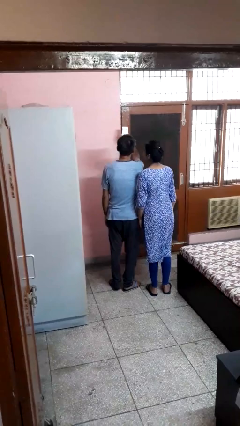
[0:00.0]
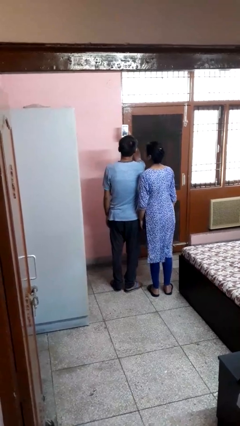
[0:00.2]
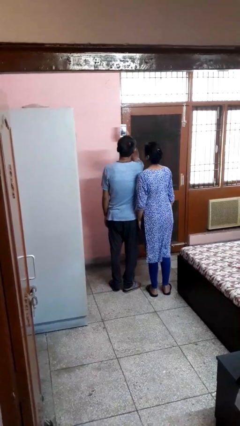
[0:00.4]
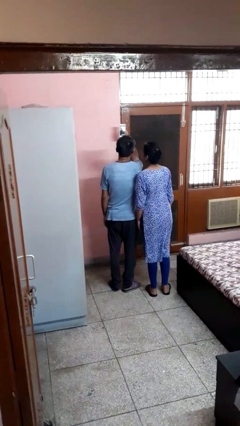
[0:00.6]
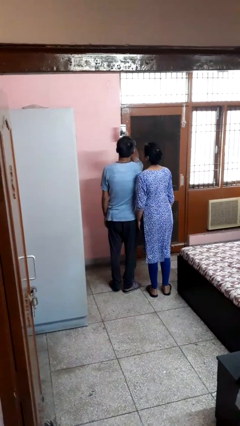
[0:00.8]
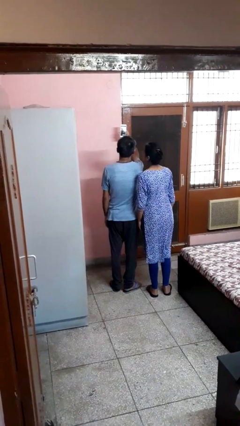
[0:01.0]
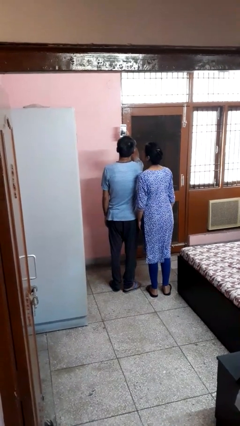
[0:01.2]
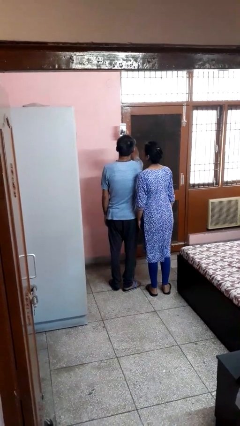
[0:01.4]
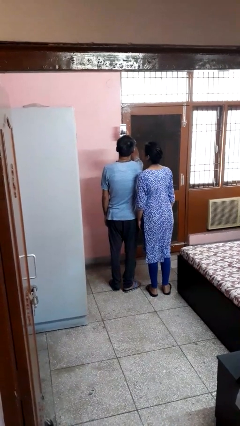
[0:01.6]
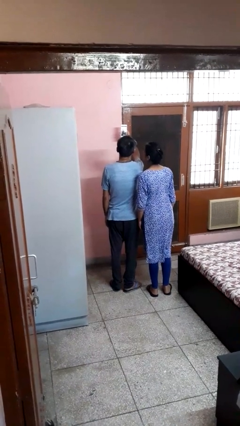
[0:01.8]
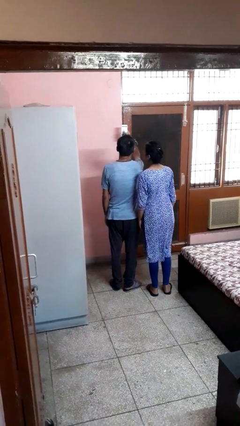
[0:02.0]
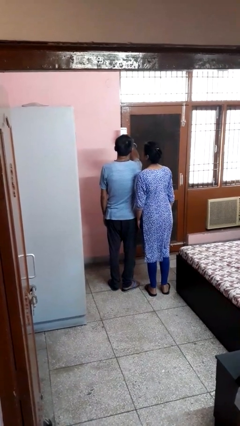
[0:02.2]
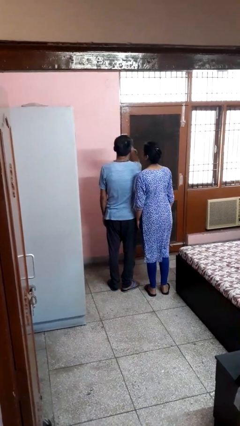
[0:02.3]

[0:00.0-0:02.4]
person takes selfie with person

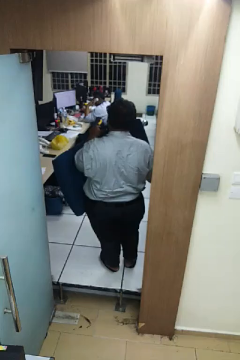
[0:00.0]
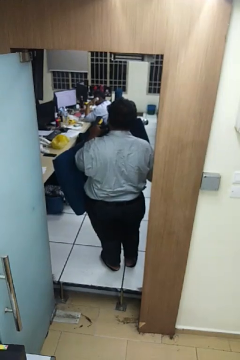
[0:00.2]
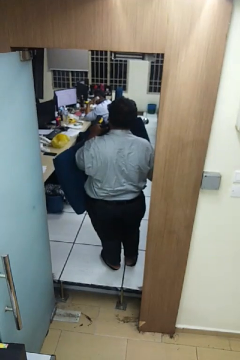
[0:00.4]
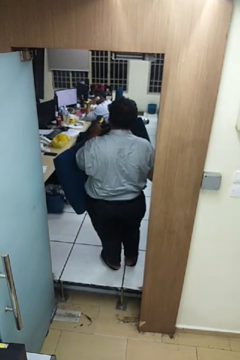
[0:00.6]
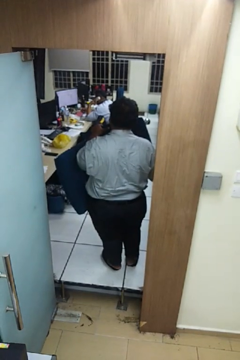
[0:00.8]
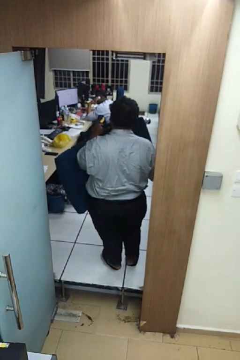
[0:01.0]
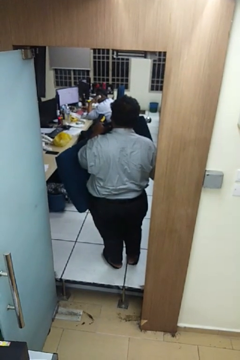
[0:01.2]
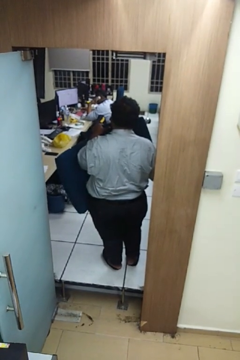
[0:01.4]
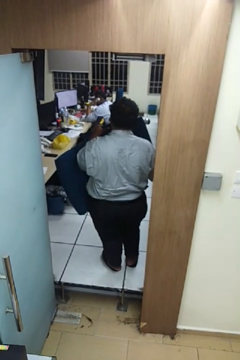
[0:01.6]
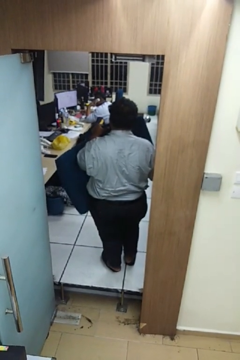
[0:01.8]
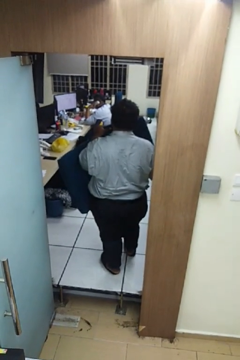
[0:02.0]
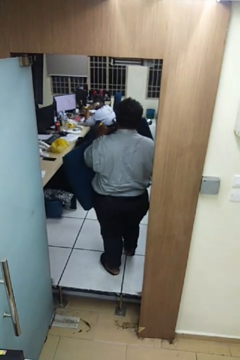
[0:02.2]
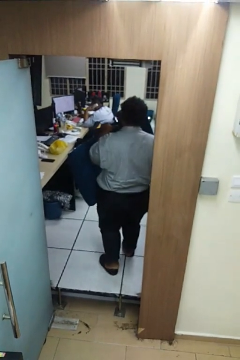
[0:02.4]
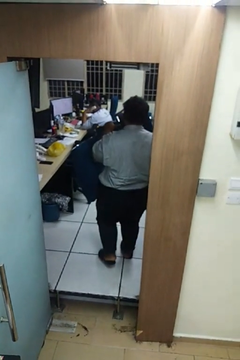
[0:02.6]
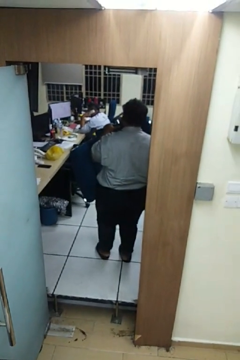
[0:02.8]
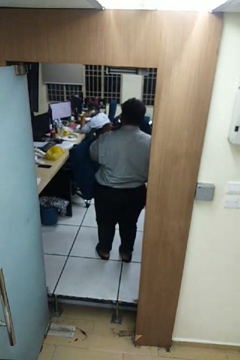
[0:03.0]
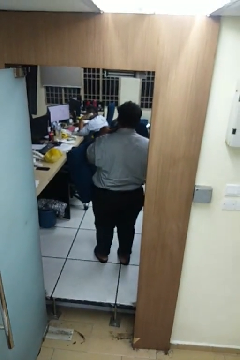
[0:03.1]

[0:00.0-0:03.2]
person carries furniture

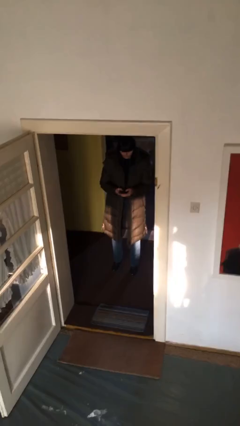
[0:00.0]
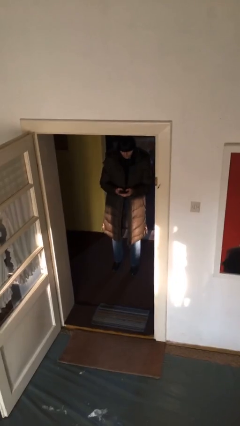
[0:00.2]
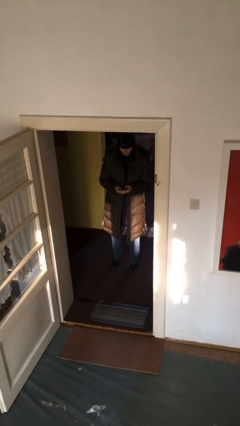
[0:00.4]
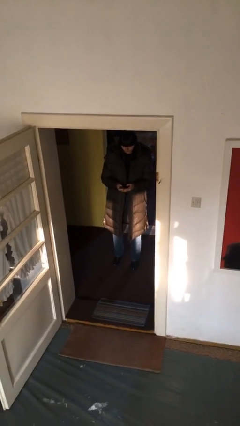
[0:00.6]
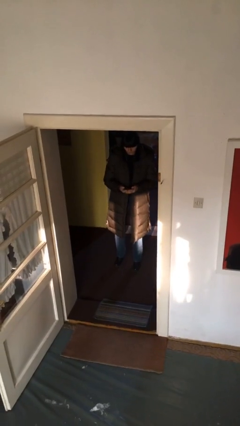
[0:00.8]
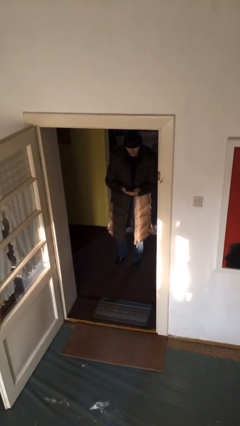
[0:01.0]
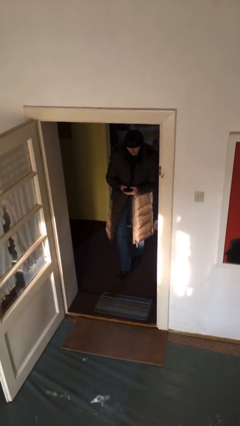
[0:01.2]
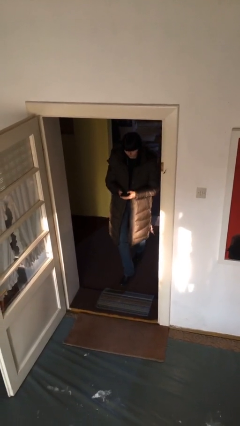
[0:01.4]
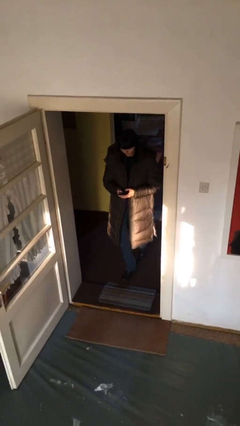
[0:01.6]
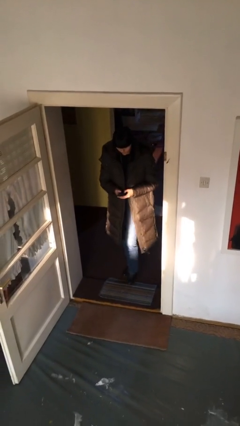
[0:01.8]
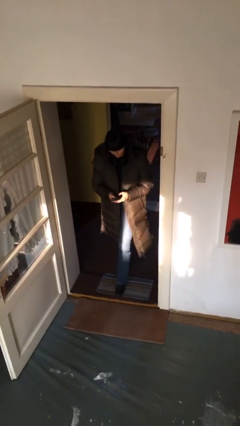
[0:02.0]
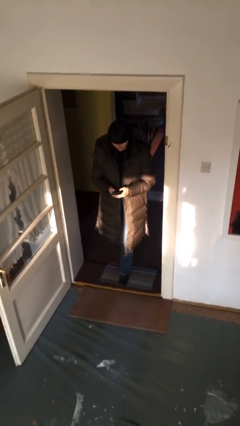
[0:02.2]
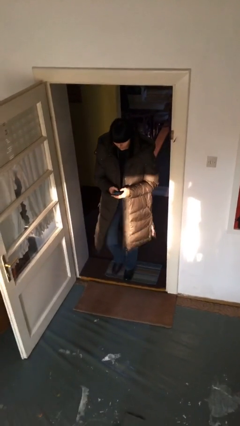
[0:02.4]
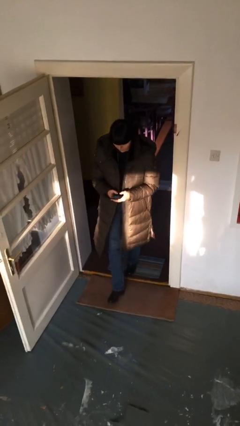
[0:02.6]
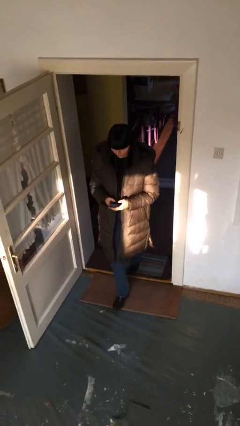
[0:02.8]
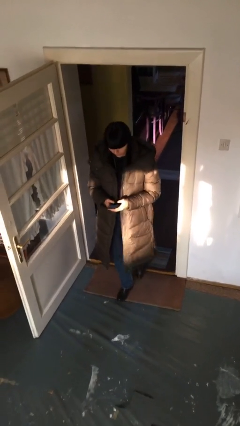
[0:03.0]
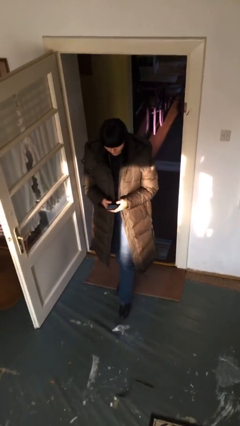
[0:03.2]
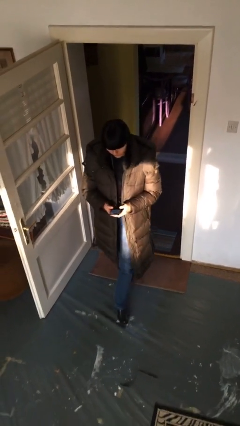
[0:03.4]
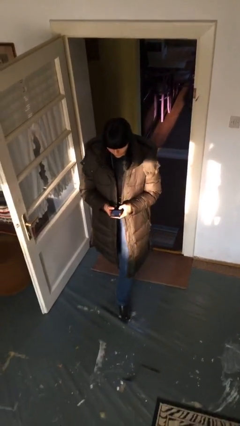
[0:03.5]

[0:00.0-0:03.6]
person enters scene through structure

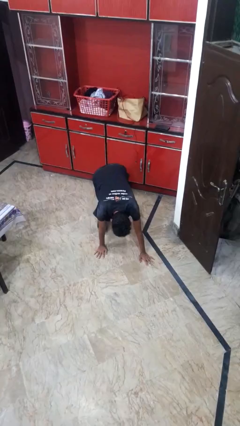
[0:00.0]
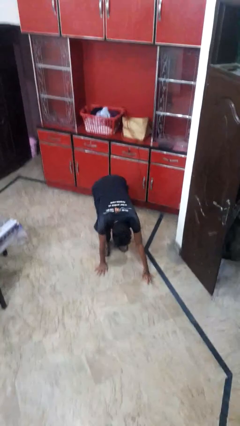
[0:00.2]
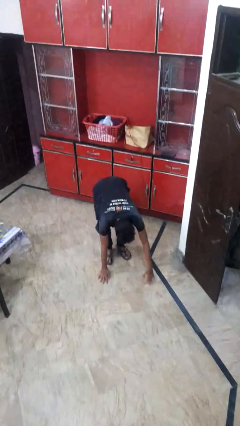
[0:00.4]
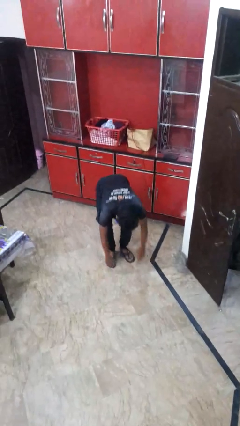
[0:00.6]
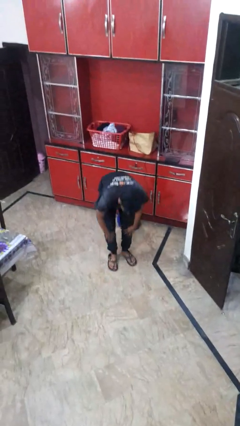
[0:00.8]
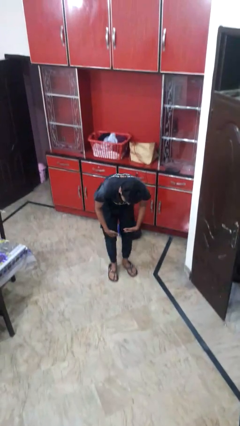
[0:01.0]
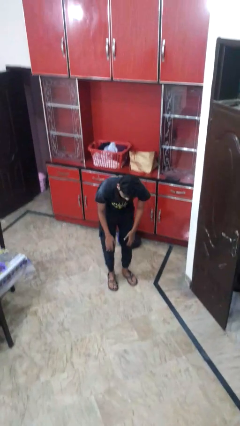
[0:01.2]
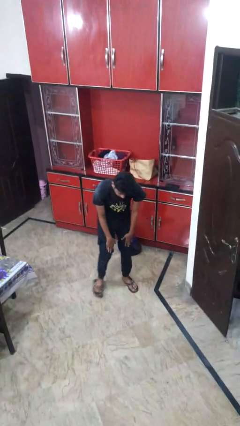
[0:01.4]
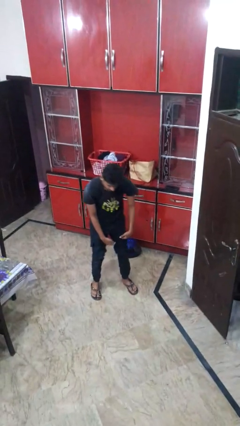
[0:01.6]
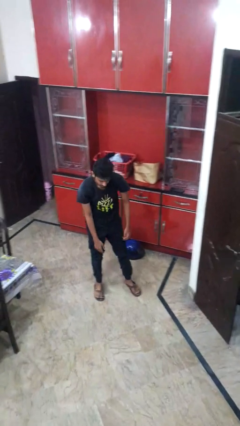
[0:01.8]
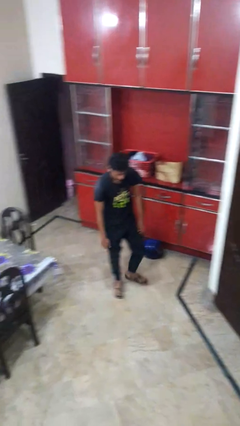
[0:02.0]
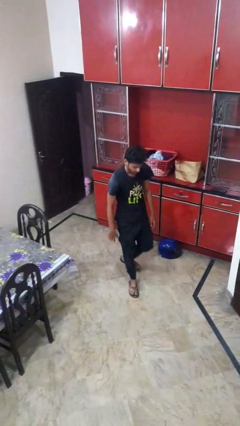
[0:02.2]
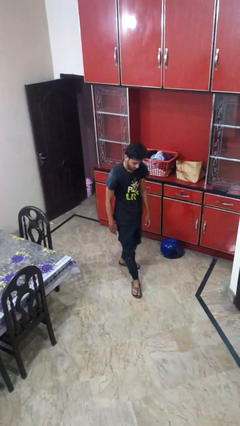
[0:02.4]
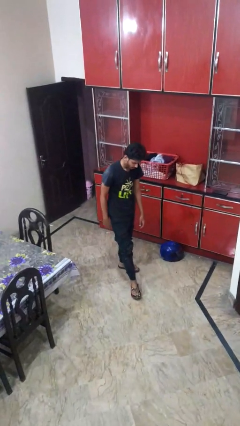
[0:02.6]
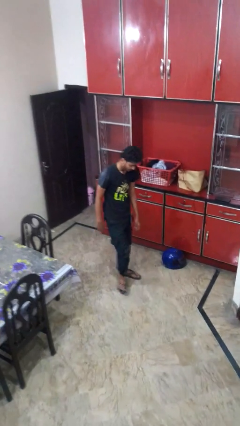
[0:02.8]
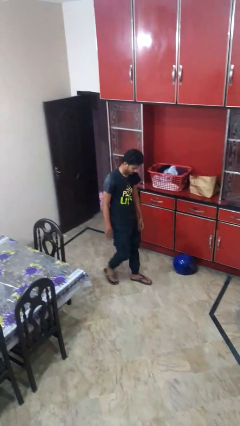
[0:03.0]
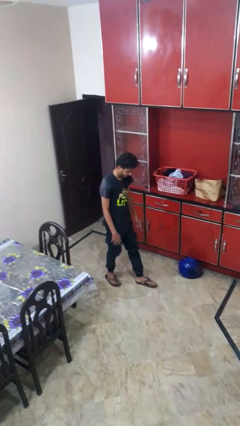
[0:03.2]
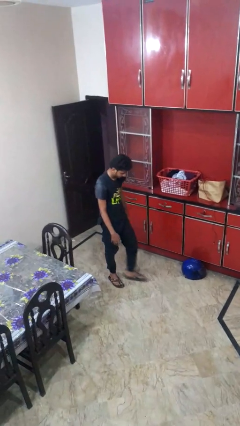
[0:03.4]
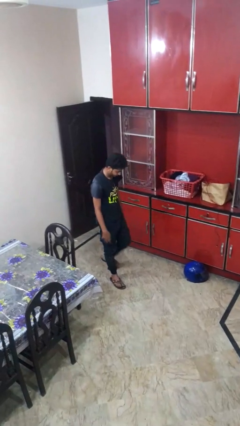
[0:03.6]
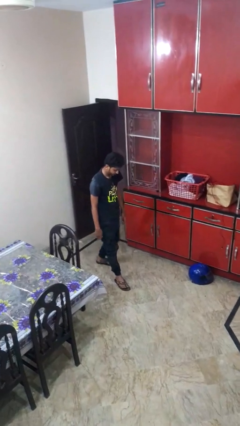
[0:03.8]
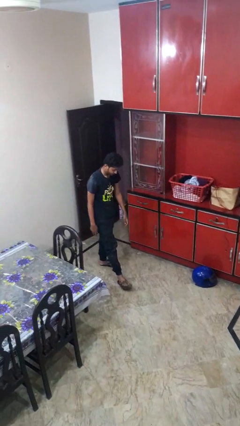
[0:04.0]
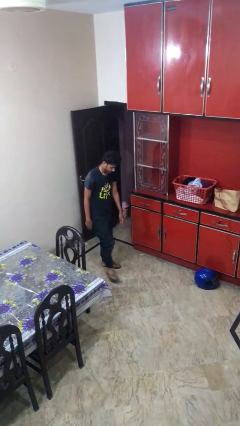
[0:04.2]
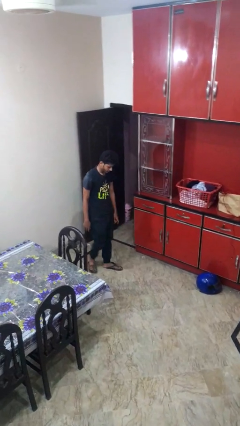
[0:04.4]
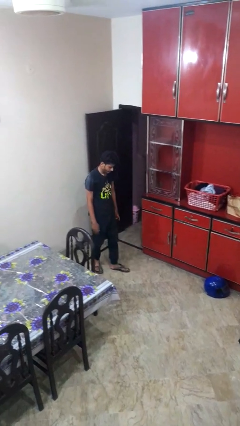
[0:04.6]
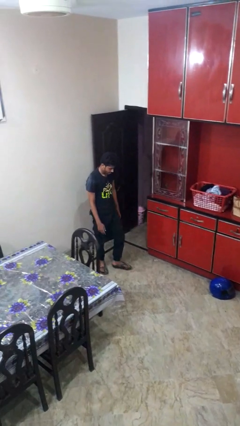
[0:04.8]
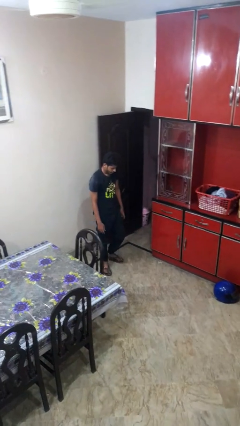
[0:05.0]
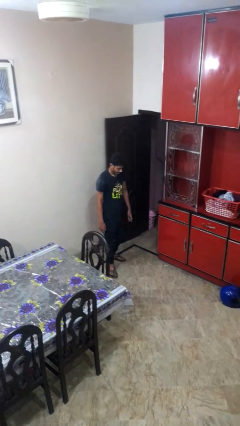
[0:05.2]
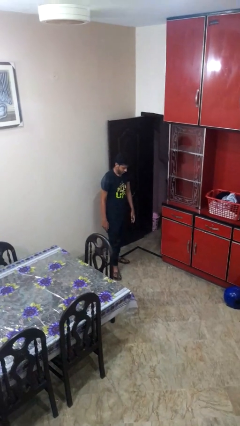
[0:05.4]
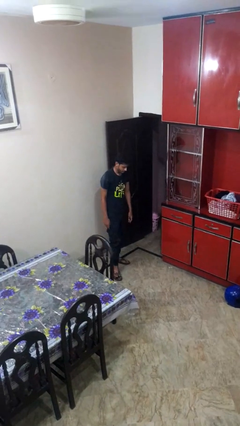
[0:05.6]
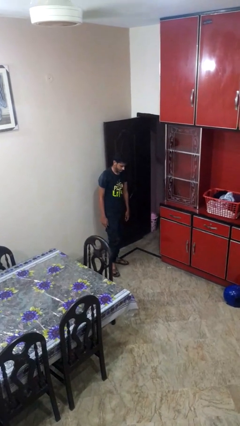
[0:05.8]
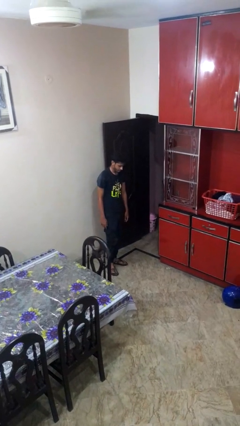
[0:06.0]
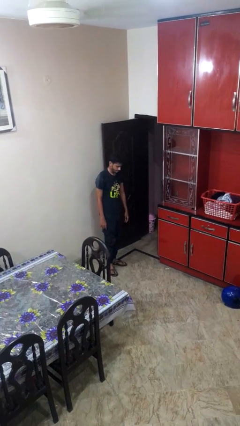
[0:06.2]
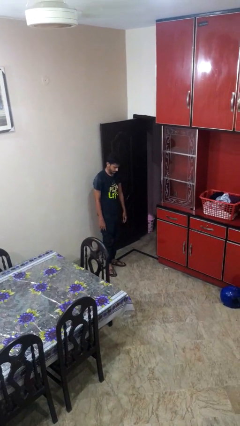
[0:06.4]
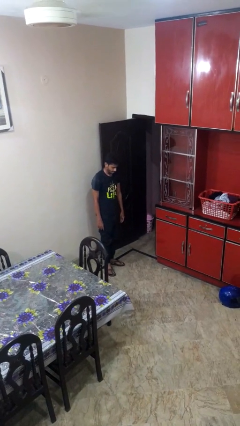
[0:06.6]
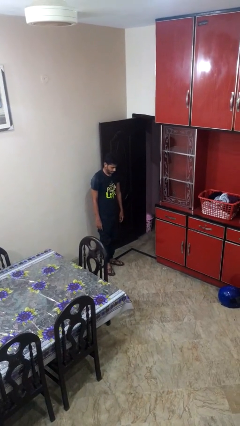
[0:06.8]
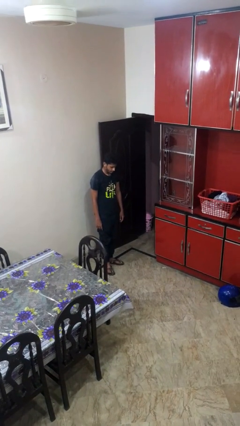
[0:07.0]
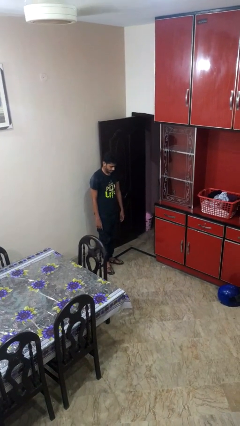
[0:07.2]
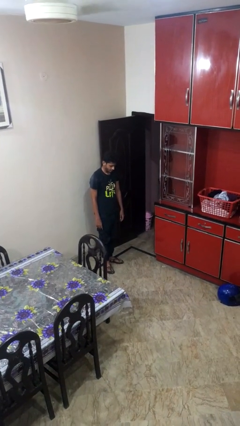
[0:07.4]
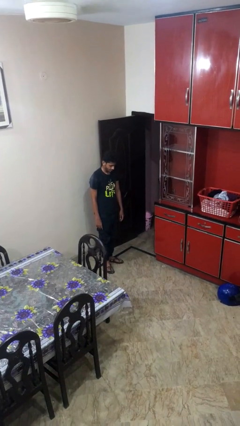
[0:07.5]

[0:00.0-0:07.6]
person stands up from floor

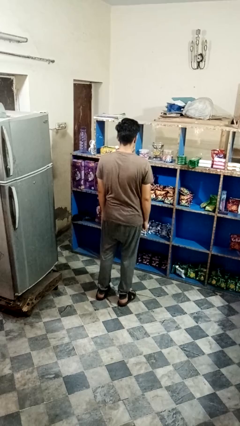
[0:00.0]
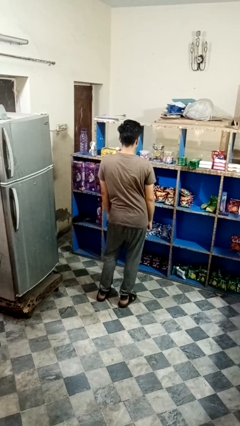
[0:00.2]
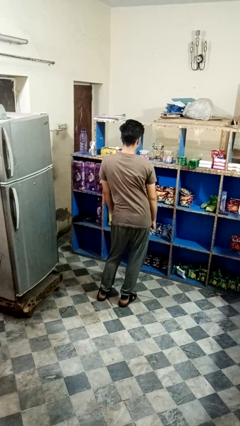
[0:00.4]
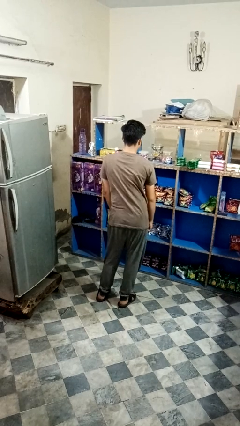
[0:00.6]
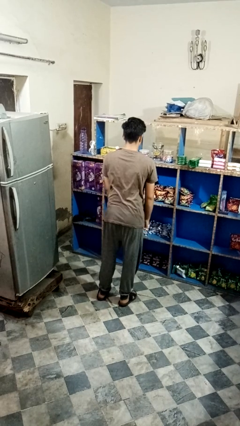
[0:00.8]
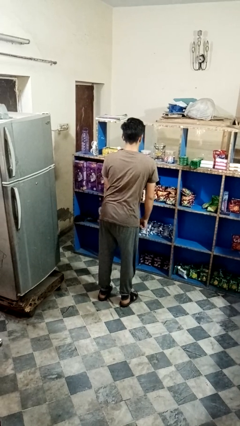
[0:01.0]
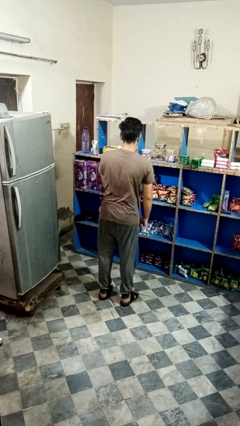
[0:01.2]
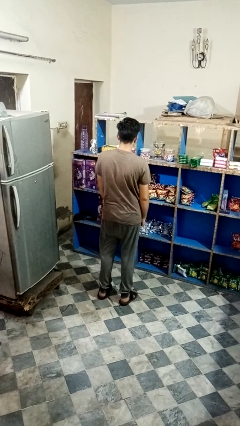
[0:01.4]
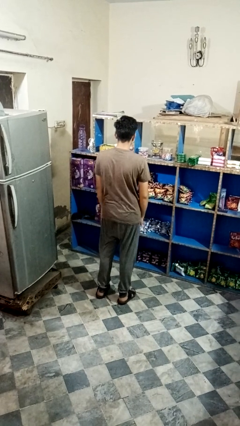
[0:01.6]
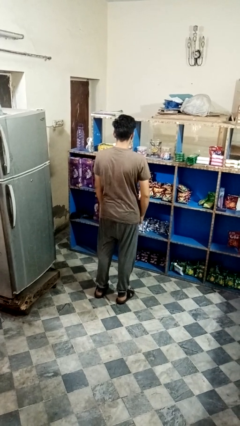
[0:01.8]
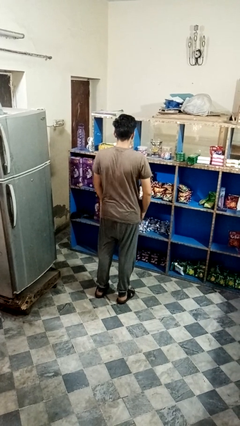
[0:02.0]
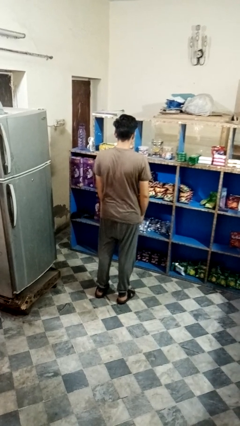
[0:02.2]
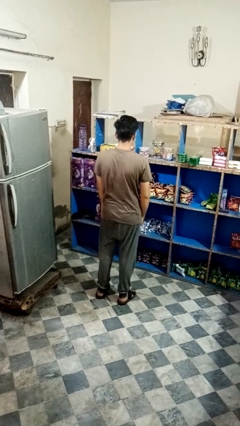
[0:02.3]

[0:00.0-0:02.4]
person wiggles hips
